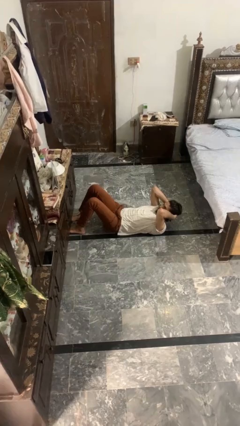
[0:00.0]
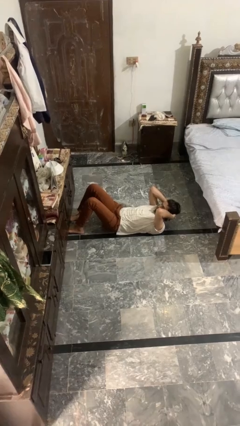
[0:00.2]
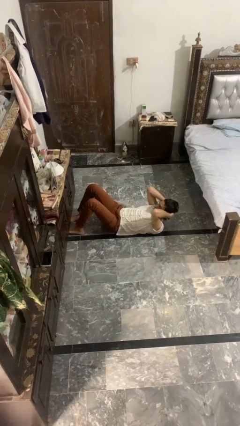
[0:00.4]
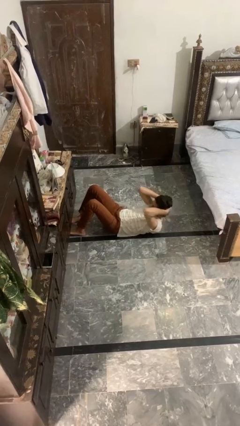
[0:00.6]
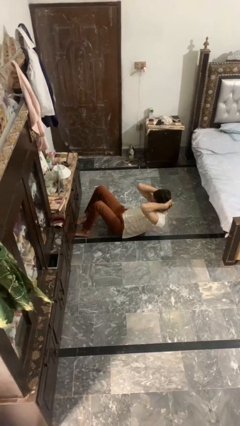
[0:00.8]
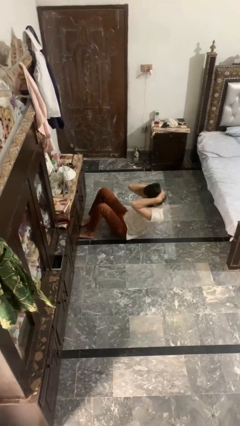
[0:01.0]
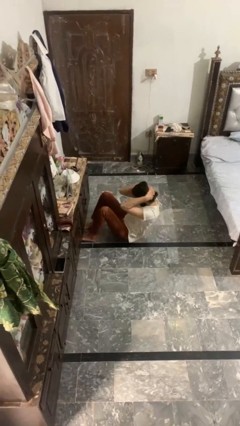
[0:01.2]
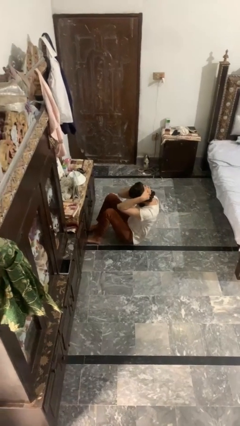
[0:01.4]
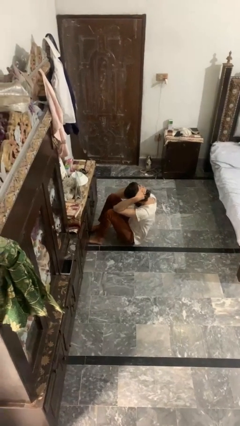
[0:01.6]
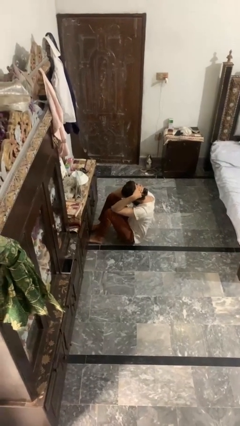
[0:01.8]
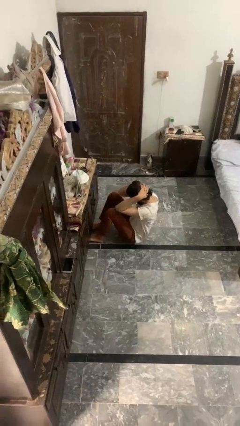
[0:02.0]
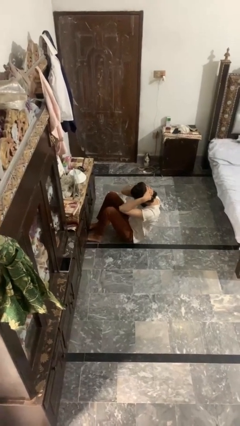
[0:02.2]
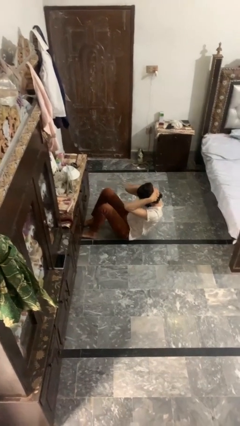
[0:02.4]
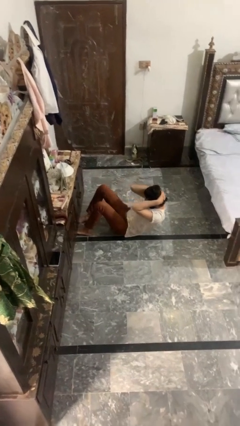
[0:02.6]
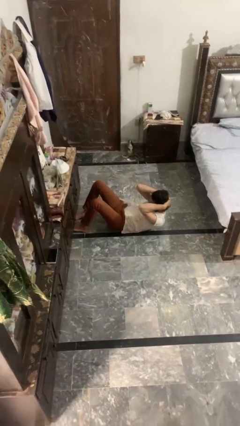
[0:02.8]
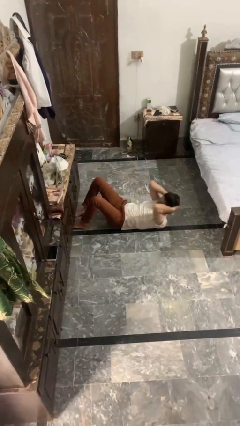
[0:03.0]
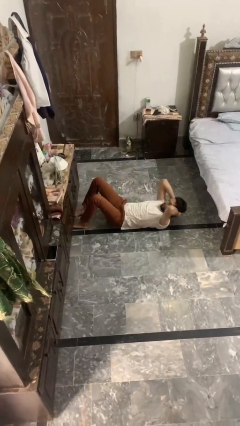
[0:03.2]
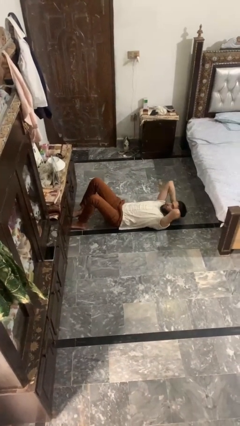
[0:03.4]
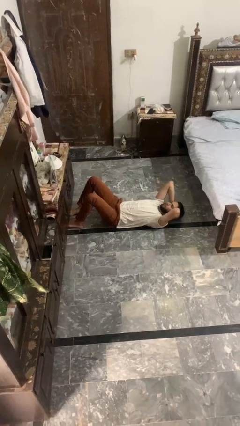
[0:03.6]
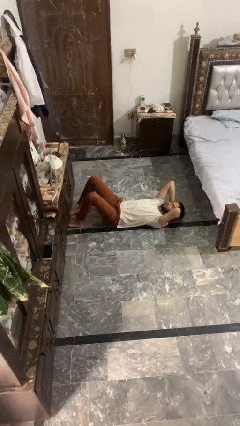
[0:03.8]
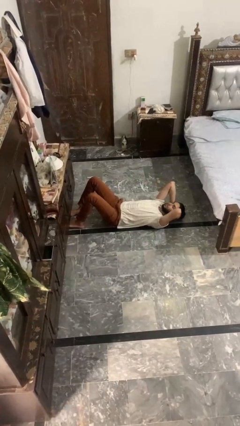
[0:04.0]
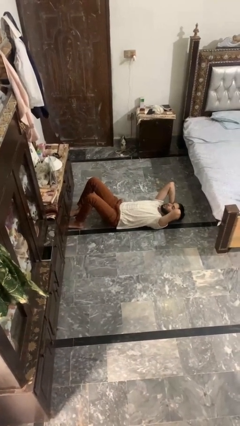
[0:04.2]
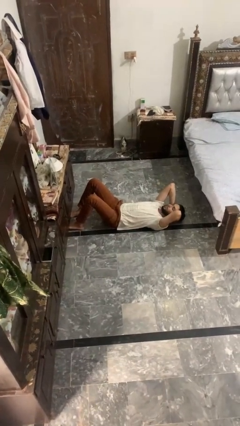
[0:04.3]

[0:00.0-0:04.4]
person exercises with situp

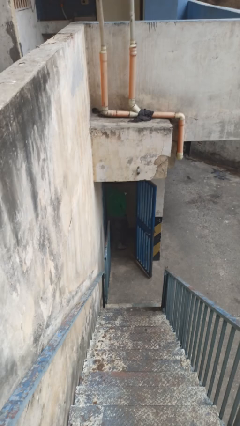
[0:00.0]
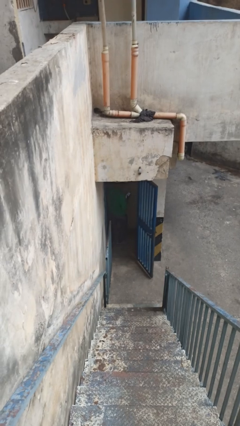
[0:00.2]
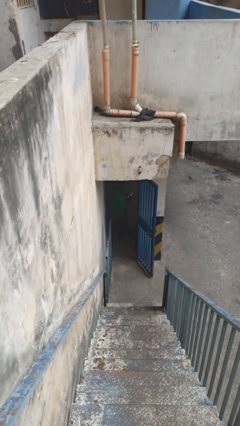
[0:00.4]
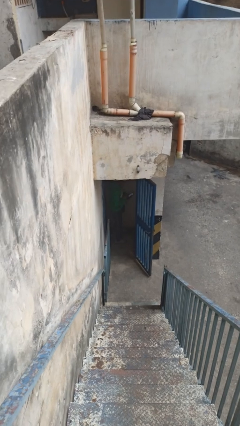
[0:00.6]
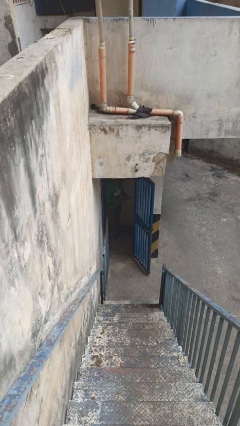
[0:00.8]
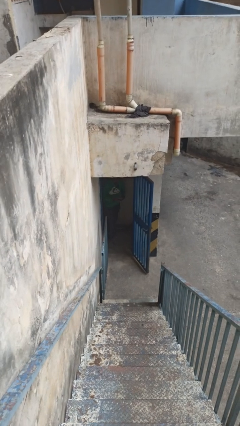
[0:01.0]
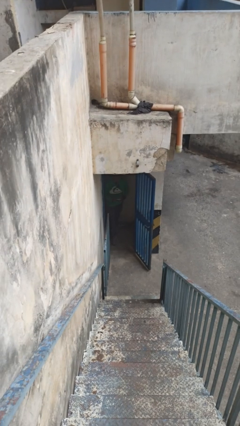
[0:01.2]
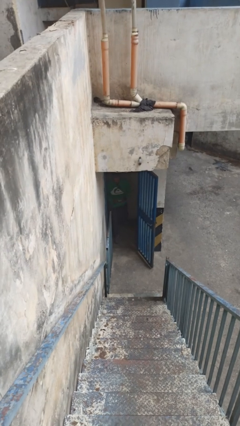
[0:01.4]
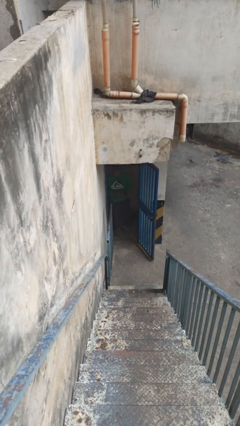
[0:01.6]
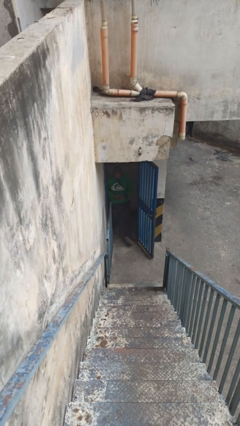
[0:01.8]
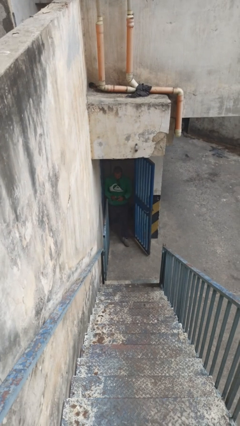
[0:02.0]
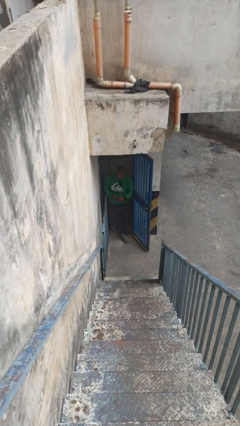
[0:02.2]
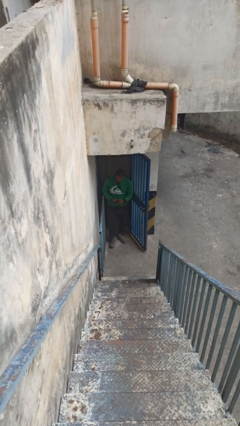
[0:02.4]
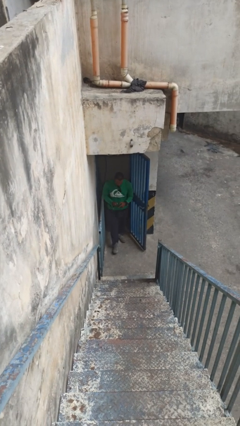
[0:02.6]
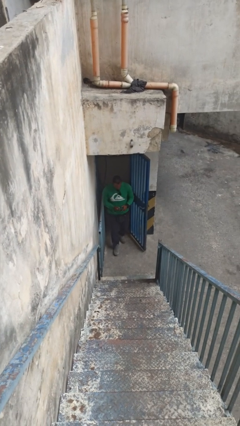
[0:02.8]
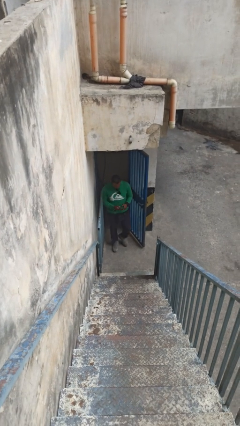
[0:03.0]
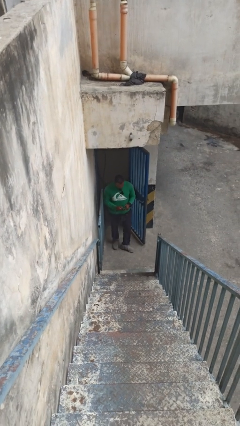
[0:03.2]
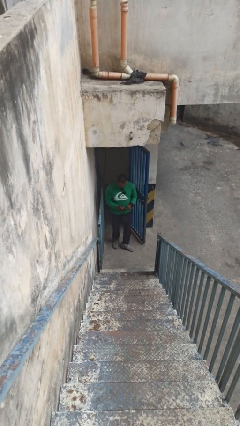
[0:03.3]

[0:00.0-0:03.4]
person enters scene through structure

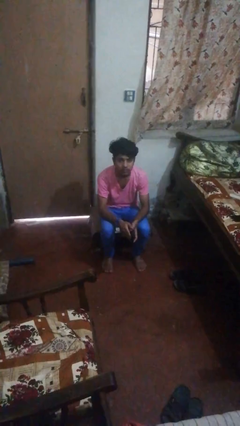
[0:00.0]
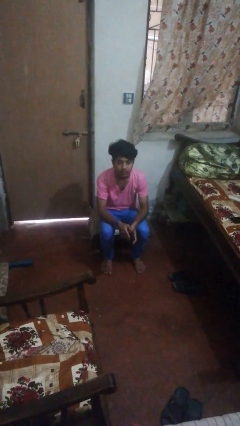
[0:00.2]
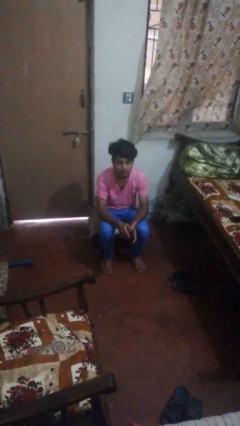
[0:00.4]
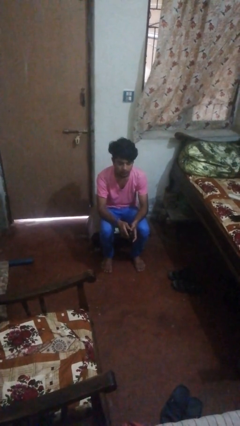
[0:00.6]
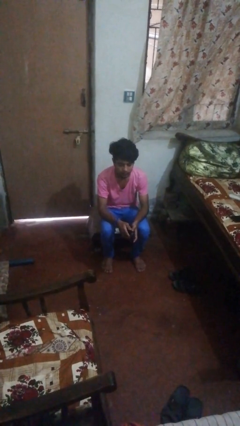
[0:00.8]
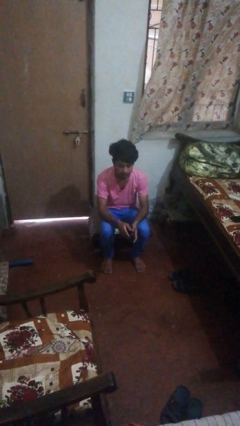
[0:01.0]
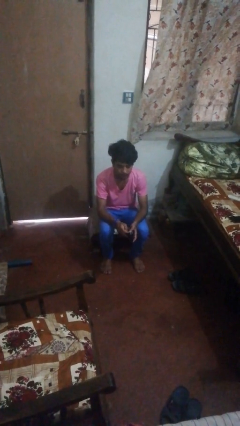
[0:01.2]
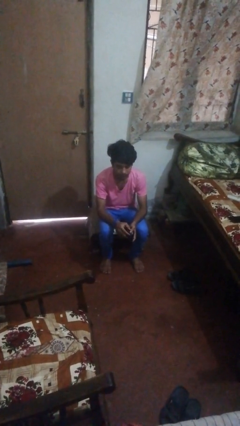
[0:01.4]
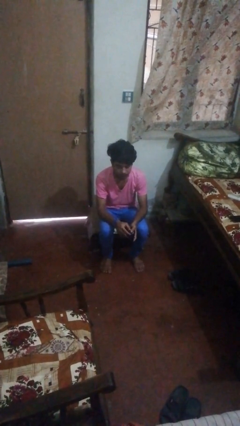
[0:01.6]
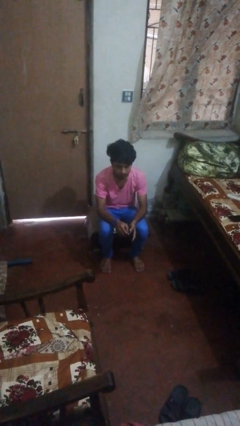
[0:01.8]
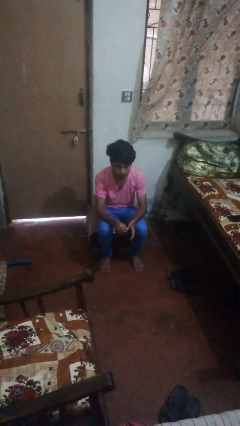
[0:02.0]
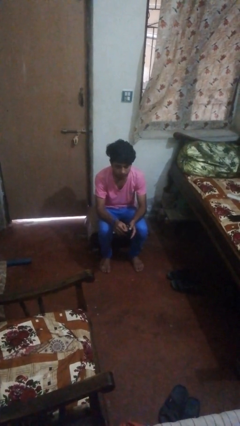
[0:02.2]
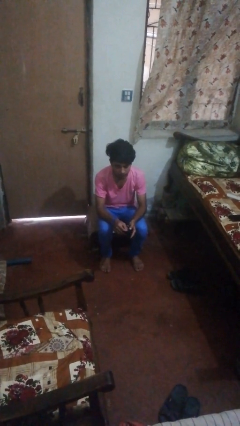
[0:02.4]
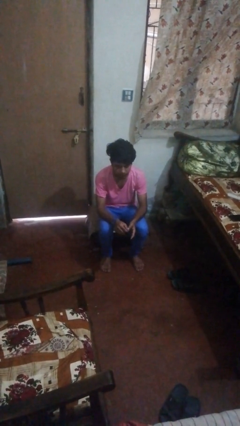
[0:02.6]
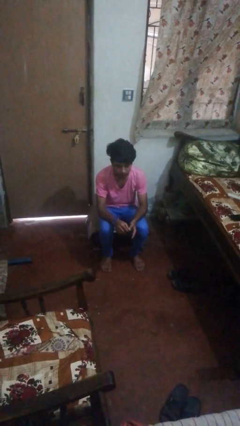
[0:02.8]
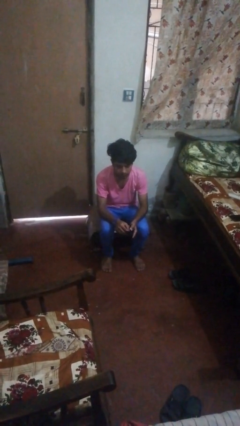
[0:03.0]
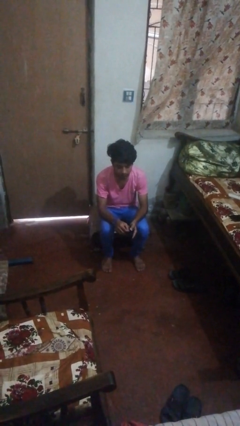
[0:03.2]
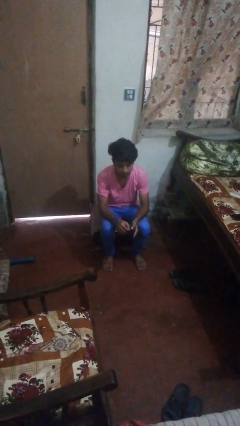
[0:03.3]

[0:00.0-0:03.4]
person searches in purse

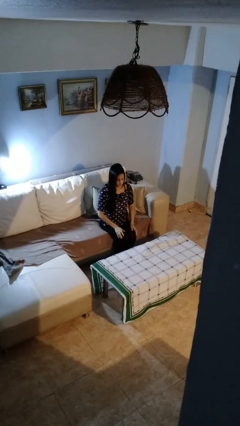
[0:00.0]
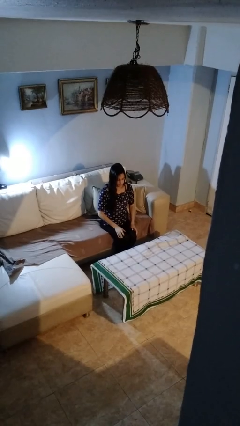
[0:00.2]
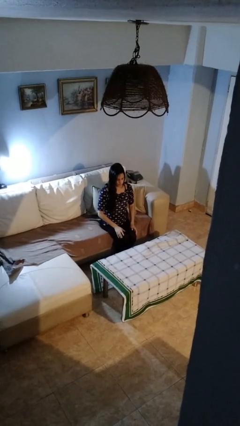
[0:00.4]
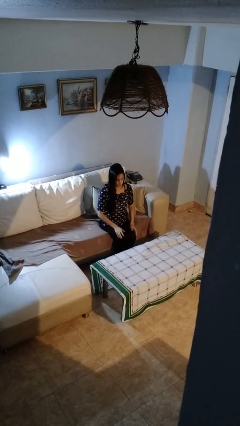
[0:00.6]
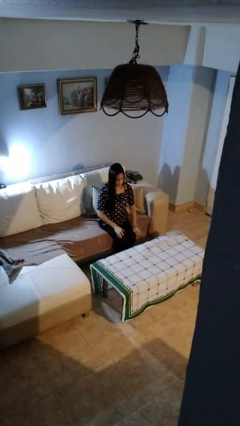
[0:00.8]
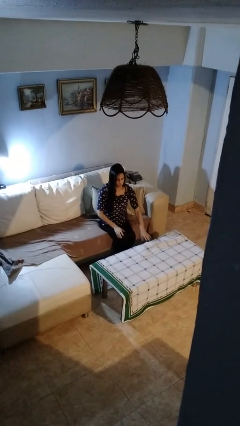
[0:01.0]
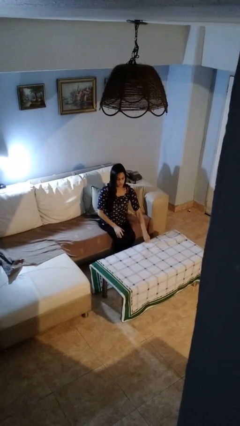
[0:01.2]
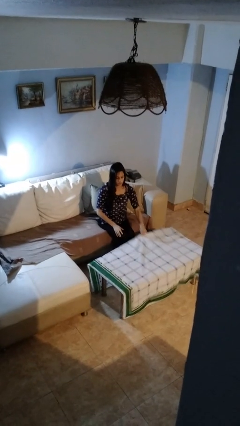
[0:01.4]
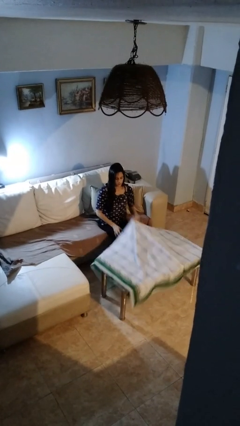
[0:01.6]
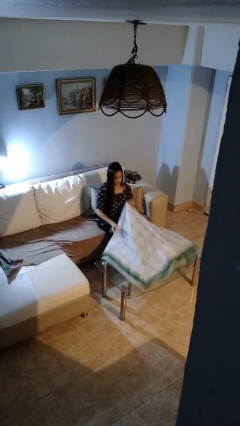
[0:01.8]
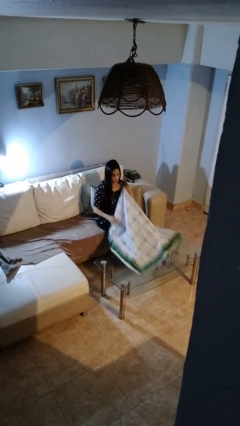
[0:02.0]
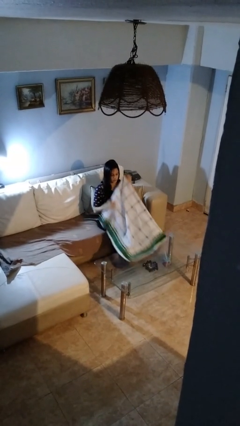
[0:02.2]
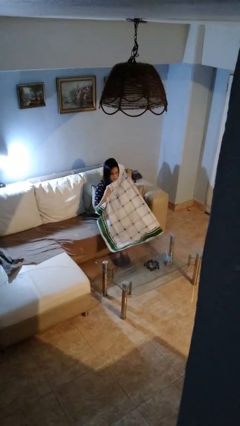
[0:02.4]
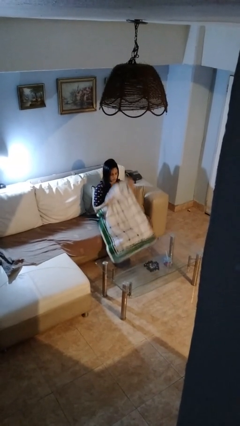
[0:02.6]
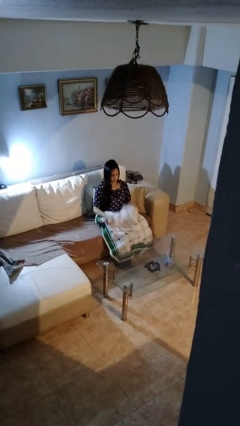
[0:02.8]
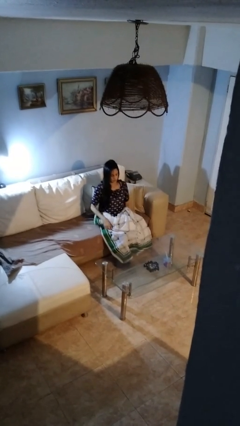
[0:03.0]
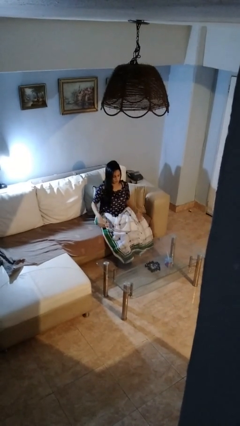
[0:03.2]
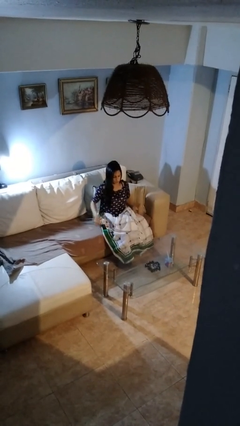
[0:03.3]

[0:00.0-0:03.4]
person folds tablecloth

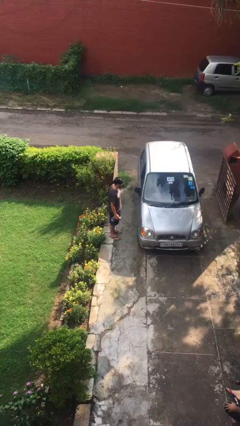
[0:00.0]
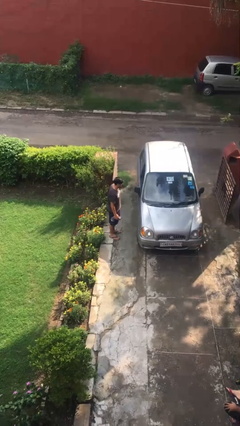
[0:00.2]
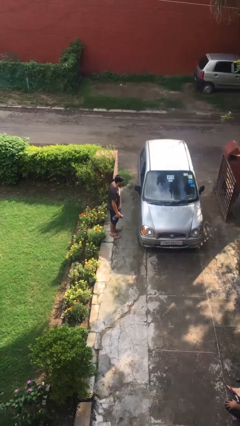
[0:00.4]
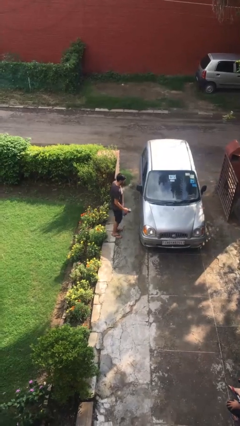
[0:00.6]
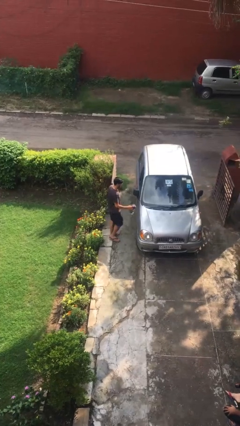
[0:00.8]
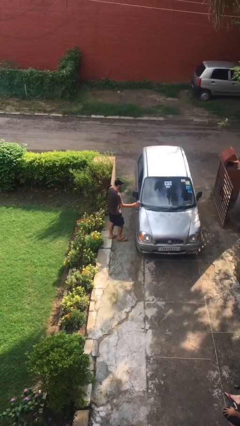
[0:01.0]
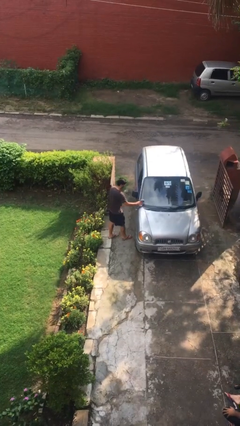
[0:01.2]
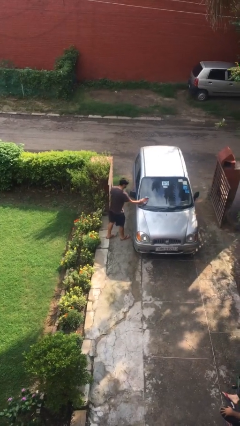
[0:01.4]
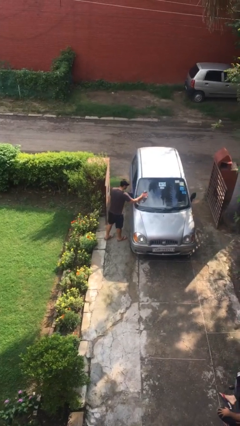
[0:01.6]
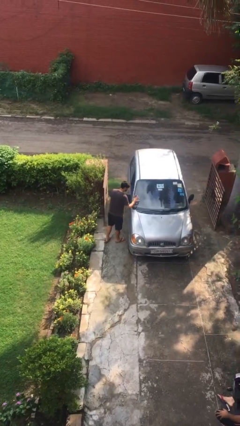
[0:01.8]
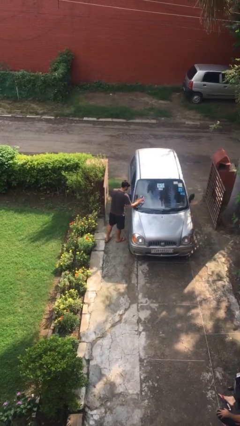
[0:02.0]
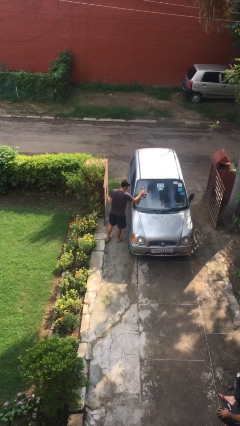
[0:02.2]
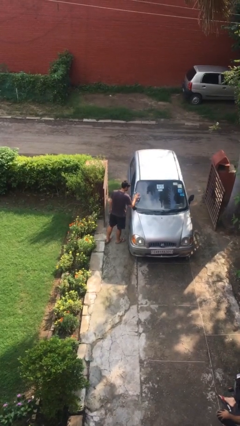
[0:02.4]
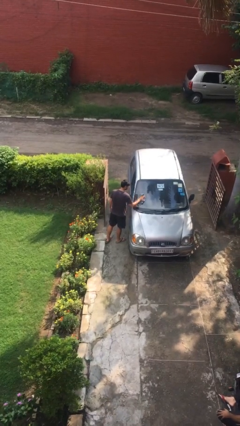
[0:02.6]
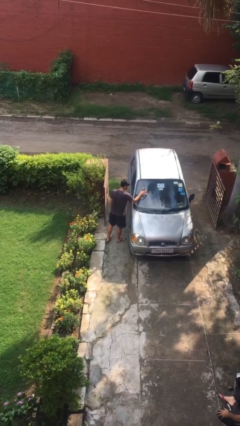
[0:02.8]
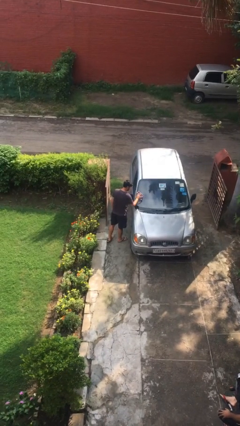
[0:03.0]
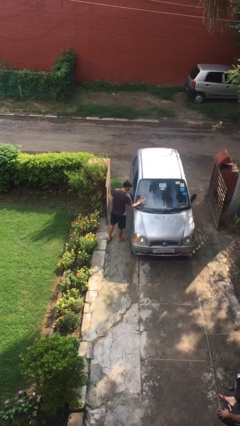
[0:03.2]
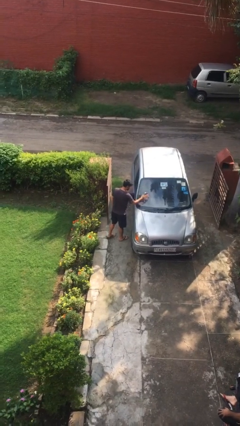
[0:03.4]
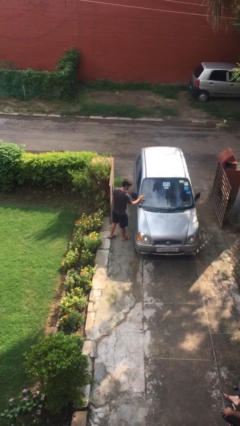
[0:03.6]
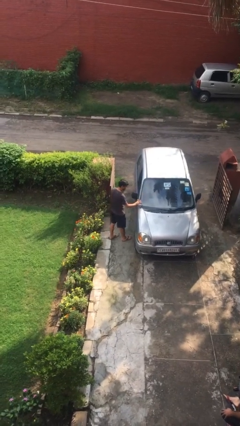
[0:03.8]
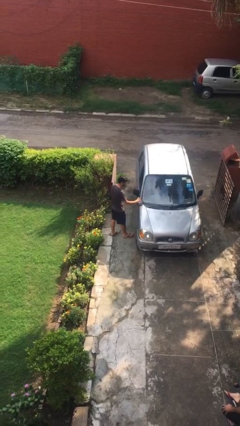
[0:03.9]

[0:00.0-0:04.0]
person polishes car with rag
